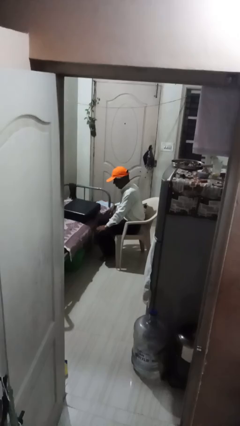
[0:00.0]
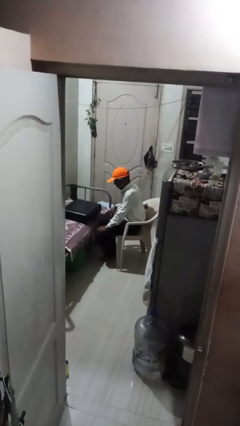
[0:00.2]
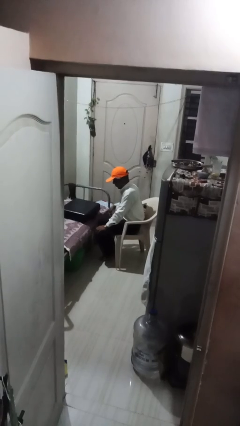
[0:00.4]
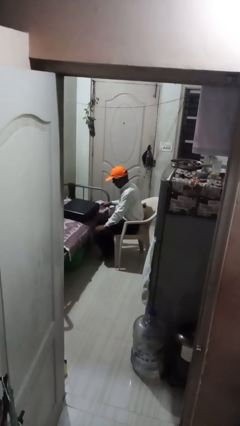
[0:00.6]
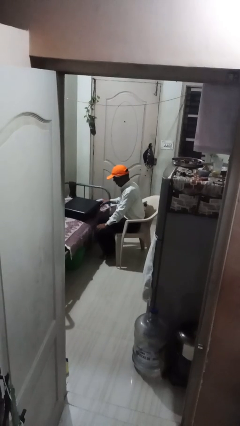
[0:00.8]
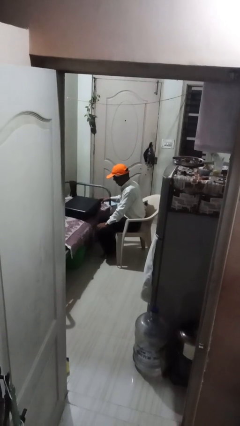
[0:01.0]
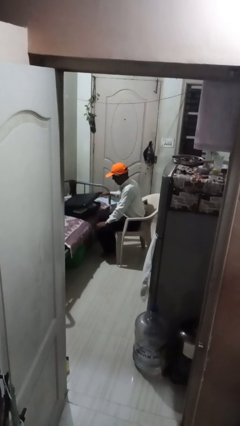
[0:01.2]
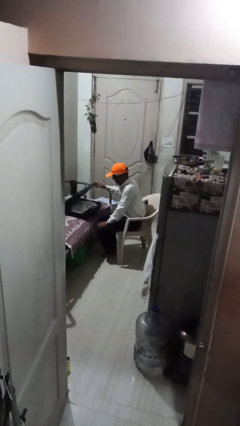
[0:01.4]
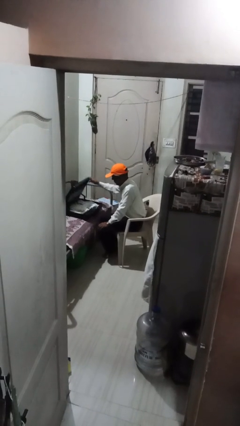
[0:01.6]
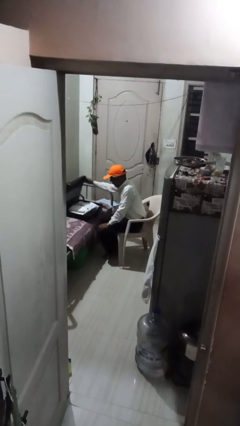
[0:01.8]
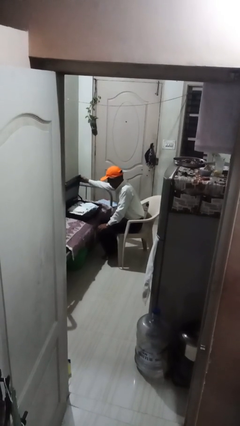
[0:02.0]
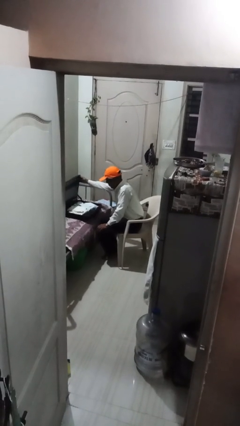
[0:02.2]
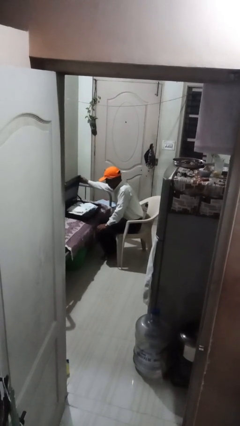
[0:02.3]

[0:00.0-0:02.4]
person opens suitcase

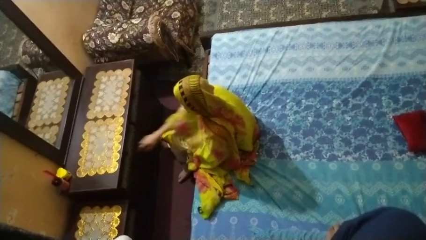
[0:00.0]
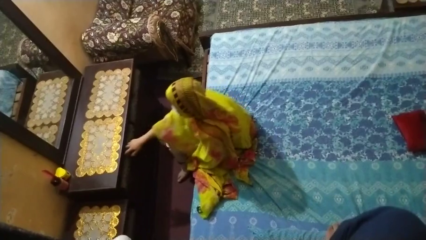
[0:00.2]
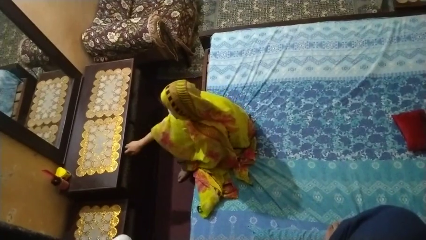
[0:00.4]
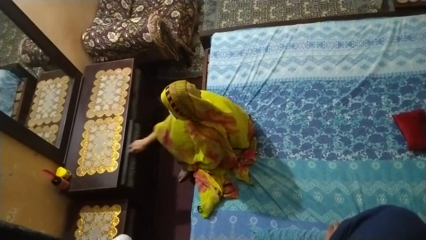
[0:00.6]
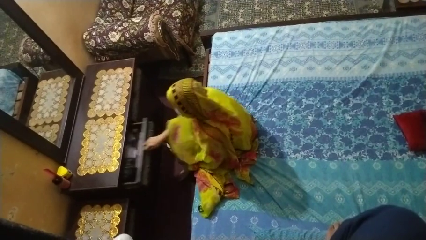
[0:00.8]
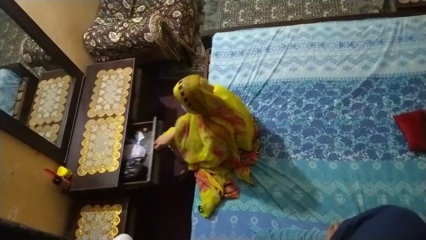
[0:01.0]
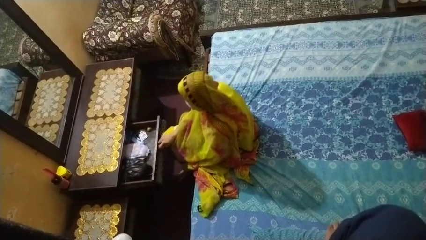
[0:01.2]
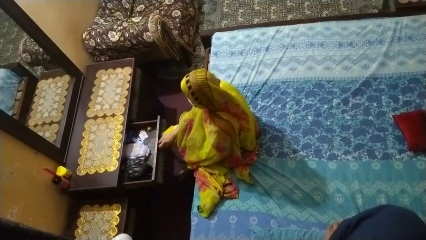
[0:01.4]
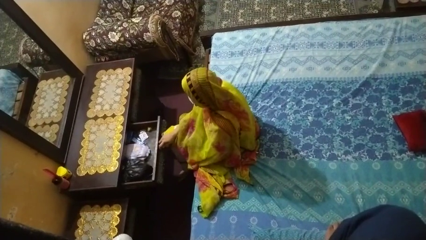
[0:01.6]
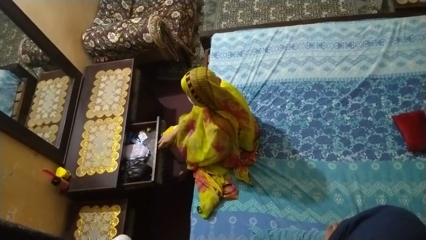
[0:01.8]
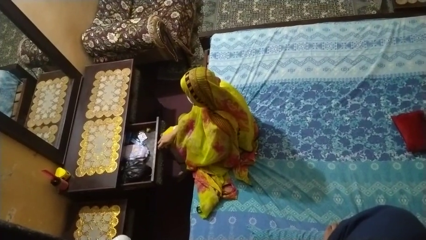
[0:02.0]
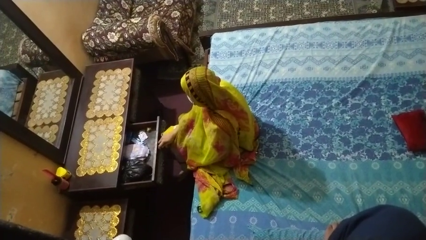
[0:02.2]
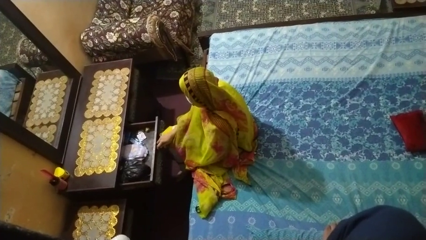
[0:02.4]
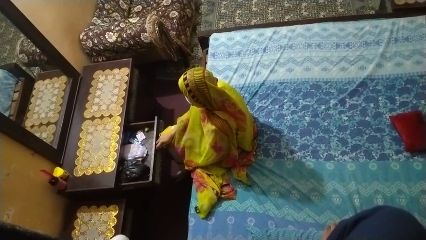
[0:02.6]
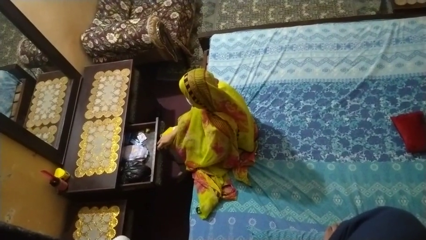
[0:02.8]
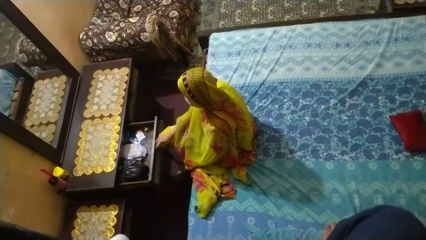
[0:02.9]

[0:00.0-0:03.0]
person opens dresser drawer

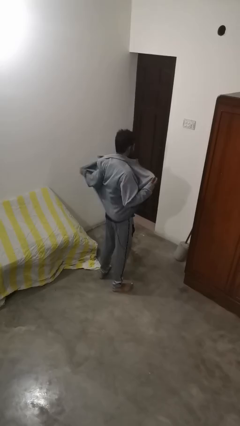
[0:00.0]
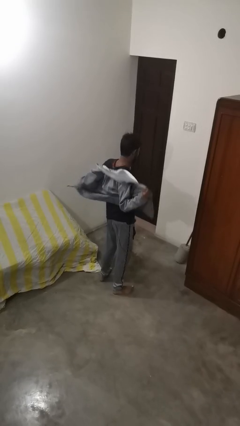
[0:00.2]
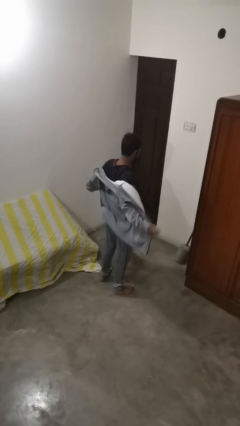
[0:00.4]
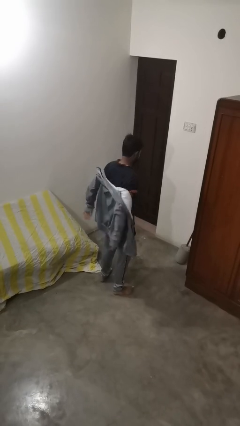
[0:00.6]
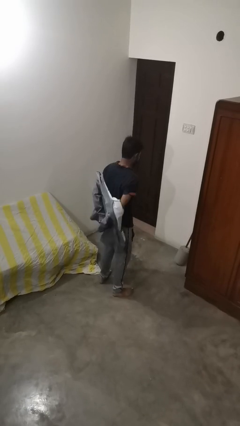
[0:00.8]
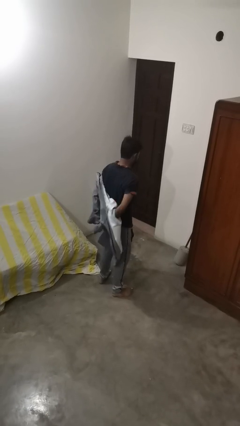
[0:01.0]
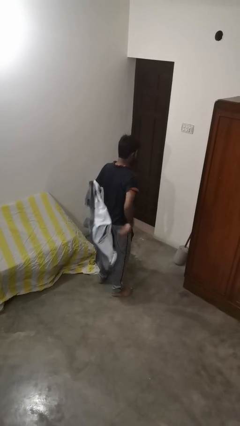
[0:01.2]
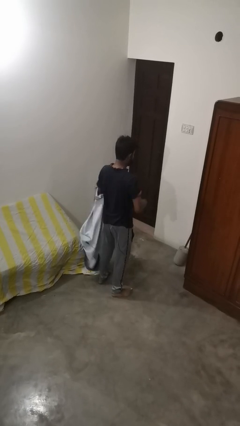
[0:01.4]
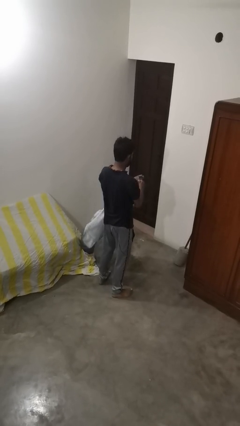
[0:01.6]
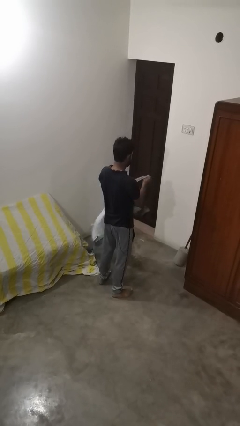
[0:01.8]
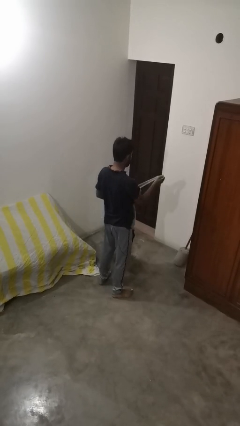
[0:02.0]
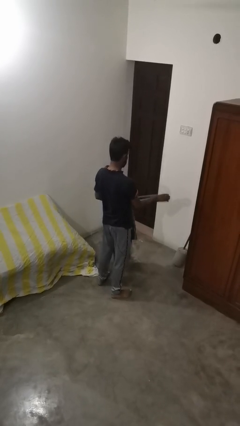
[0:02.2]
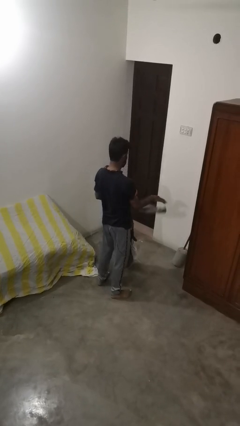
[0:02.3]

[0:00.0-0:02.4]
person takes off jacket

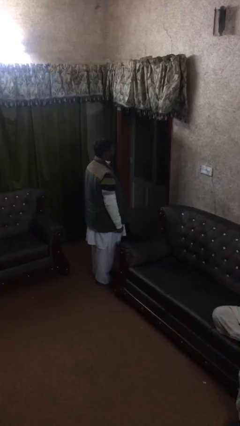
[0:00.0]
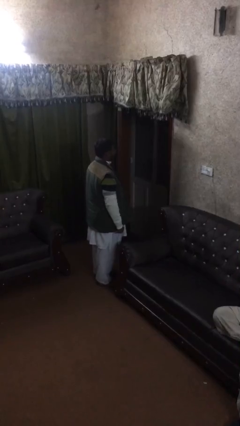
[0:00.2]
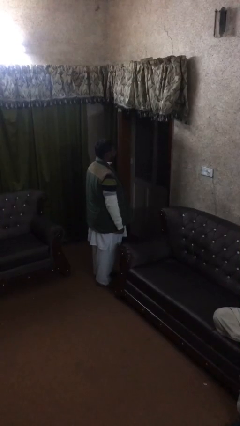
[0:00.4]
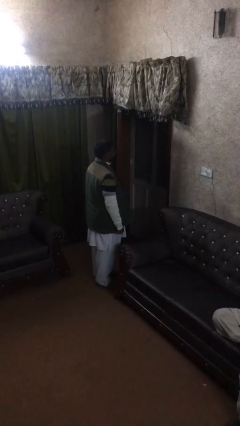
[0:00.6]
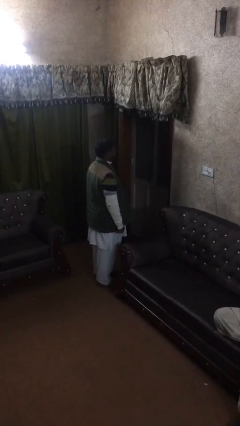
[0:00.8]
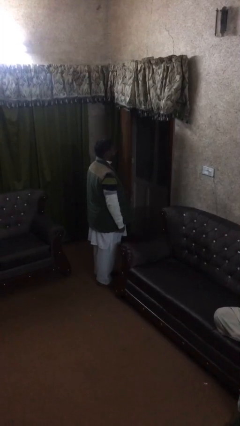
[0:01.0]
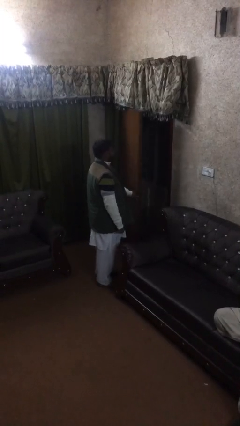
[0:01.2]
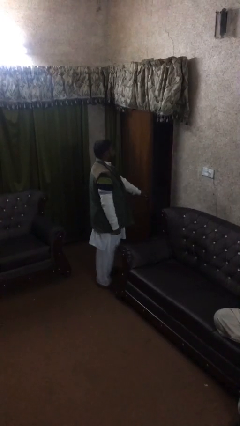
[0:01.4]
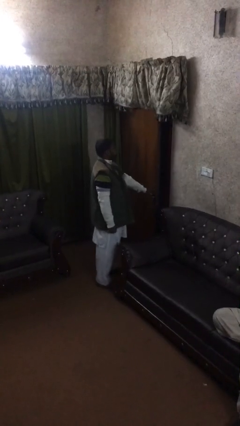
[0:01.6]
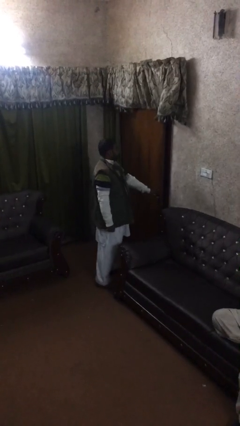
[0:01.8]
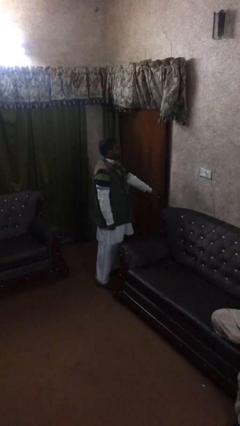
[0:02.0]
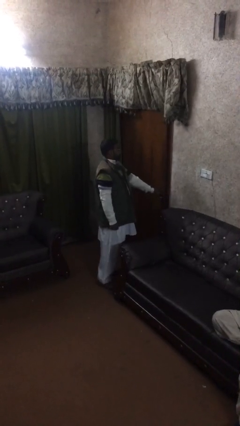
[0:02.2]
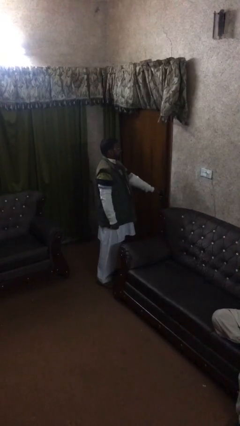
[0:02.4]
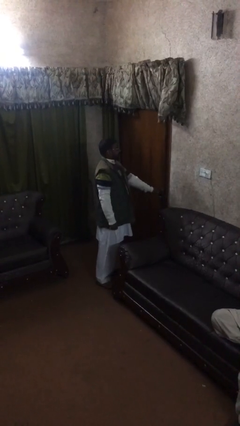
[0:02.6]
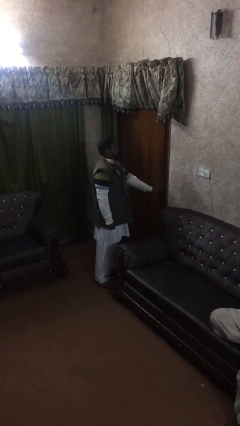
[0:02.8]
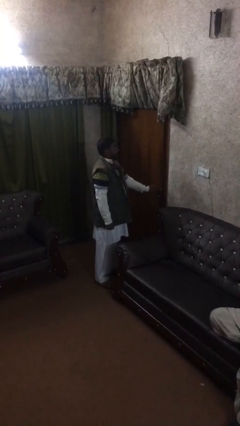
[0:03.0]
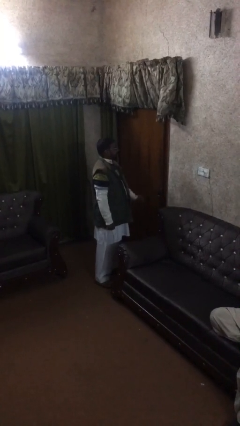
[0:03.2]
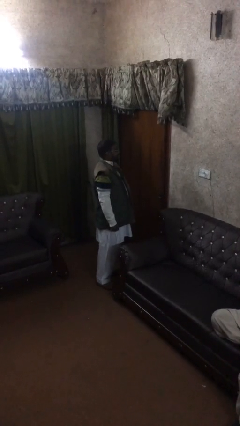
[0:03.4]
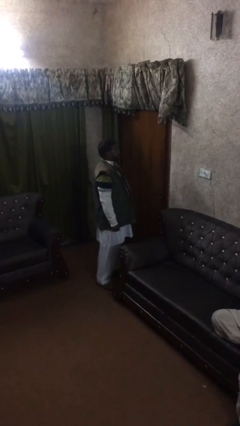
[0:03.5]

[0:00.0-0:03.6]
person closes facility door

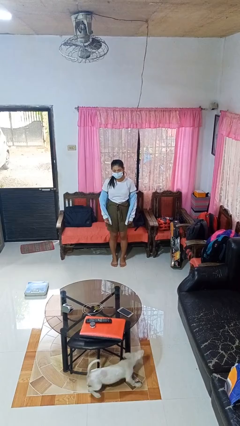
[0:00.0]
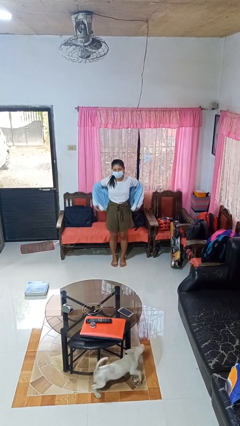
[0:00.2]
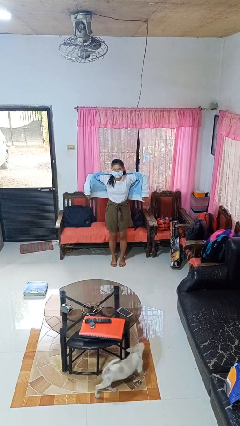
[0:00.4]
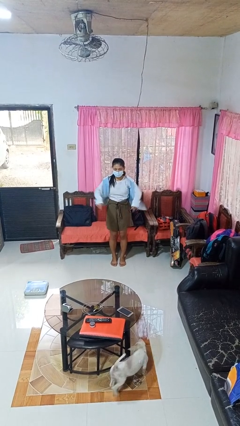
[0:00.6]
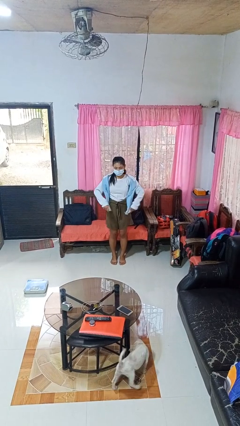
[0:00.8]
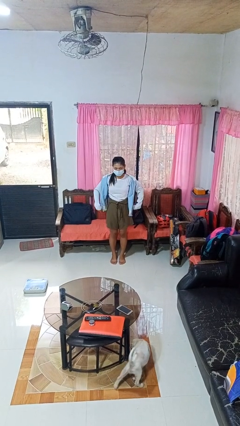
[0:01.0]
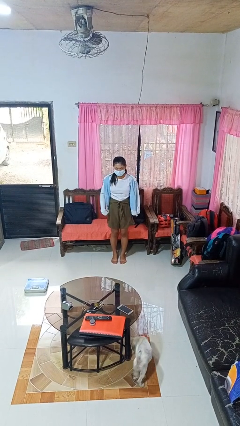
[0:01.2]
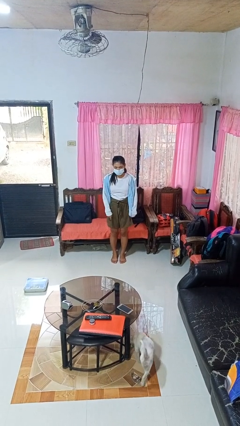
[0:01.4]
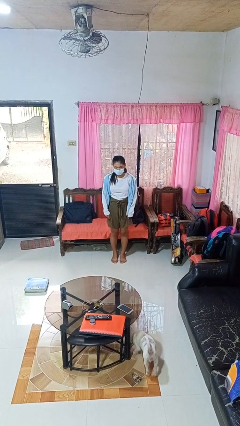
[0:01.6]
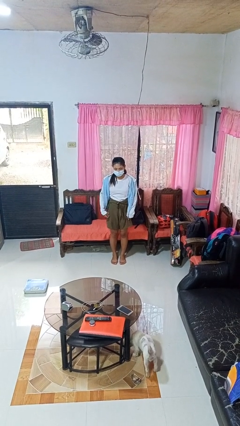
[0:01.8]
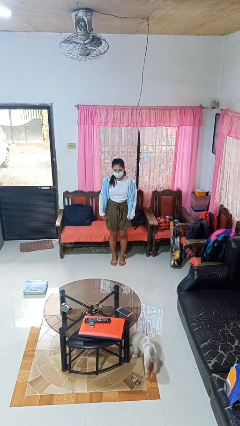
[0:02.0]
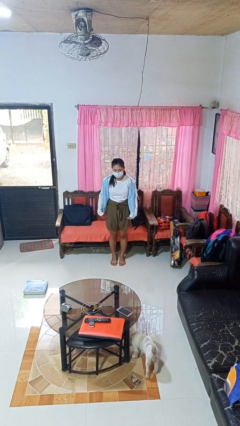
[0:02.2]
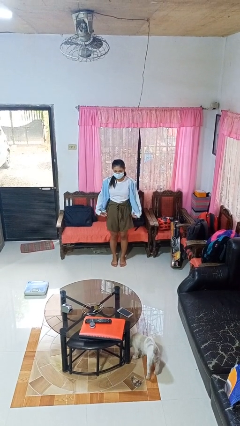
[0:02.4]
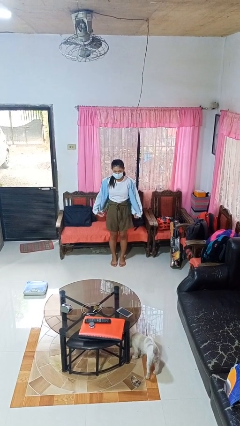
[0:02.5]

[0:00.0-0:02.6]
person puts on jacket

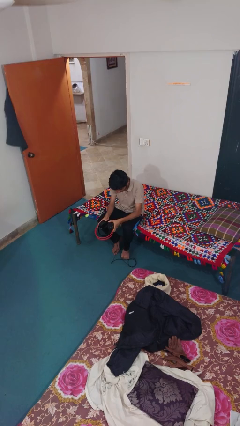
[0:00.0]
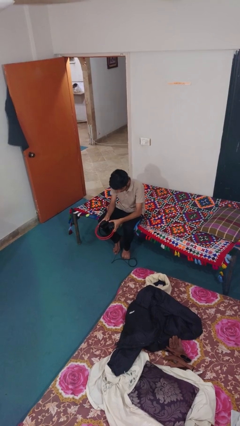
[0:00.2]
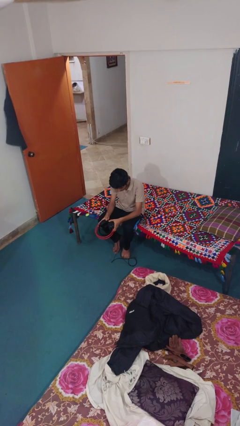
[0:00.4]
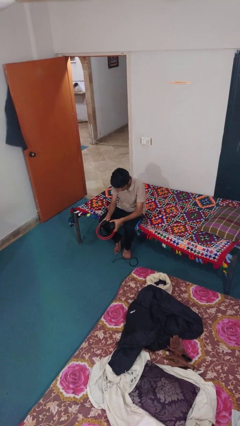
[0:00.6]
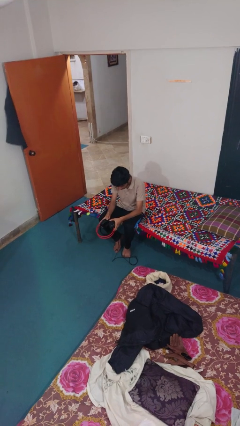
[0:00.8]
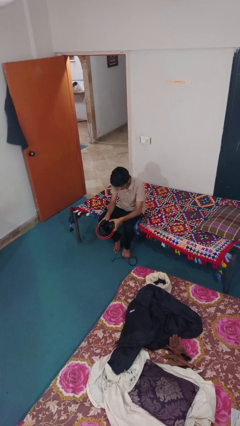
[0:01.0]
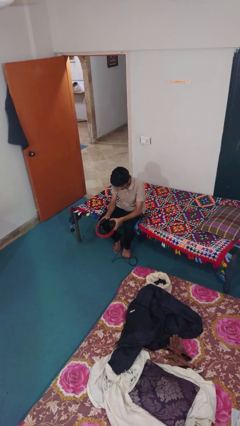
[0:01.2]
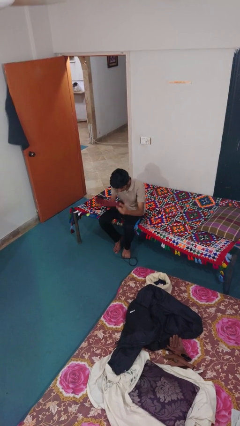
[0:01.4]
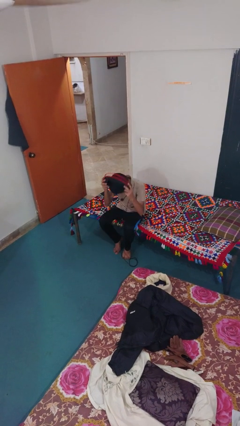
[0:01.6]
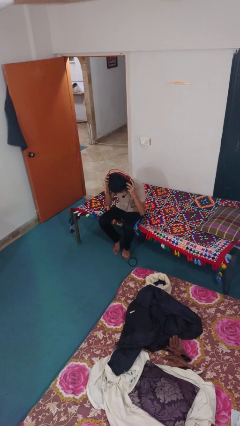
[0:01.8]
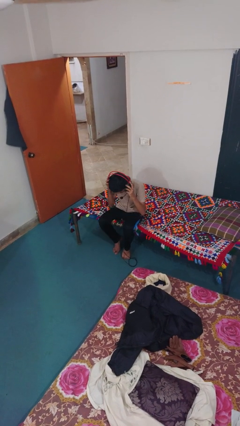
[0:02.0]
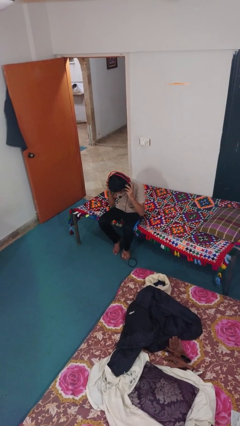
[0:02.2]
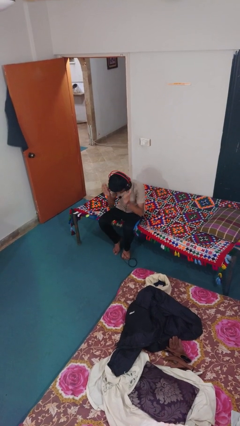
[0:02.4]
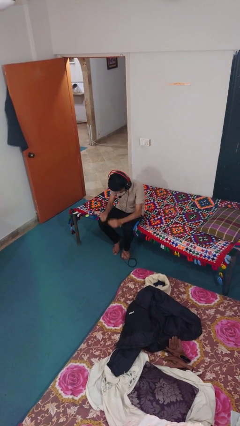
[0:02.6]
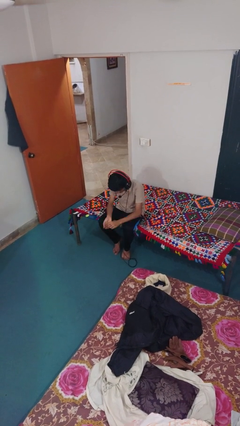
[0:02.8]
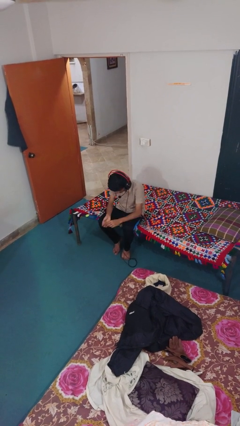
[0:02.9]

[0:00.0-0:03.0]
person puts on headphones

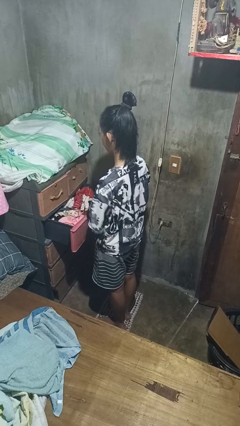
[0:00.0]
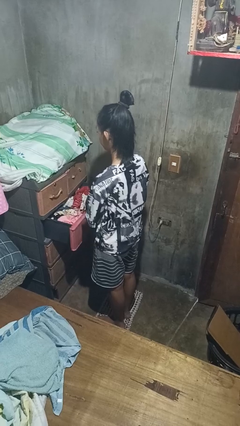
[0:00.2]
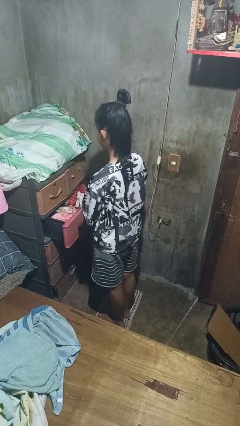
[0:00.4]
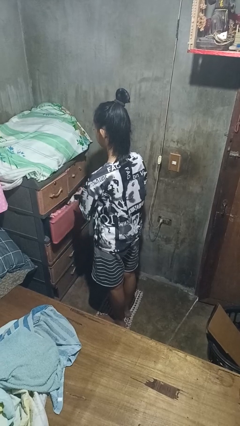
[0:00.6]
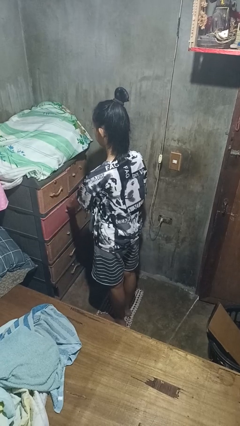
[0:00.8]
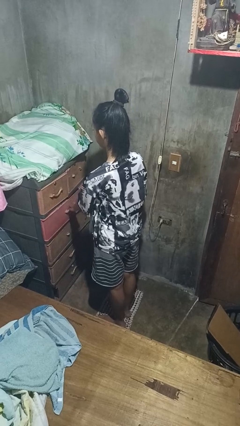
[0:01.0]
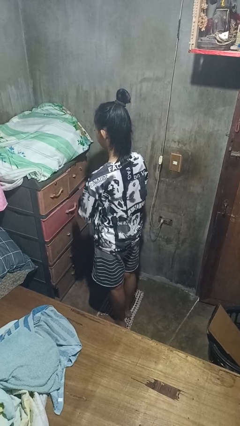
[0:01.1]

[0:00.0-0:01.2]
person closes dresser drawer
